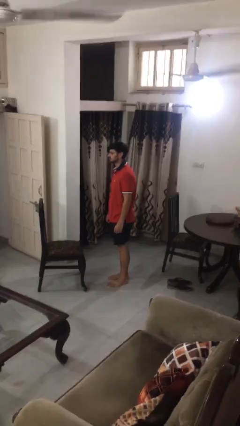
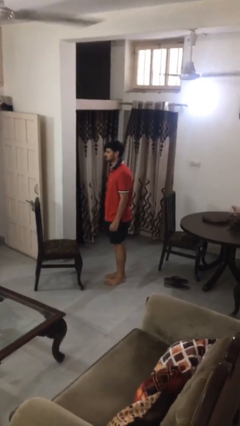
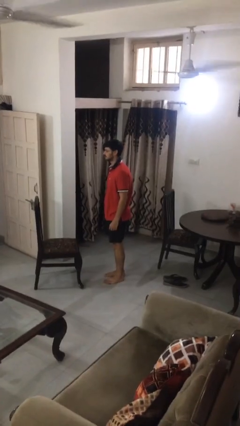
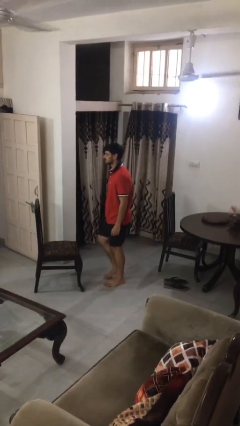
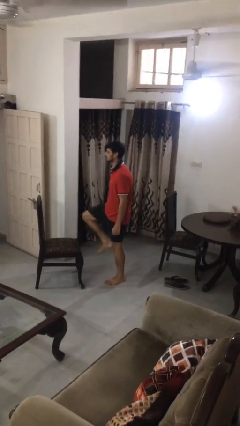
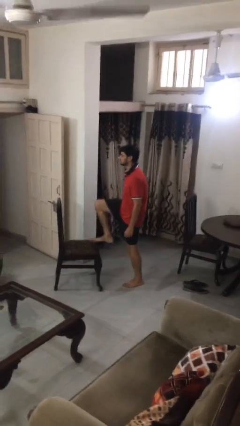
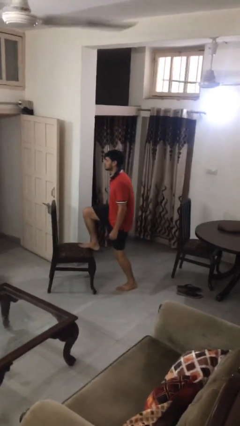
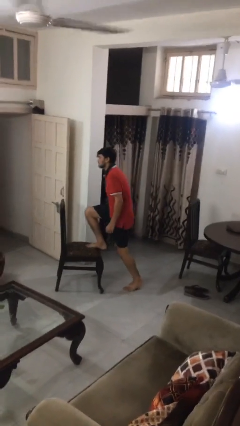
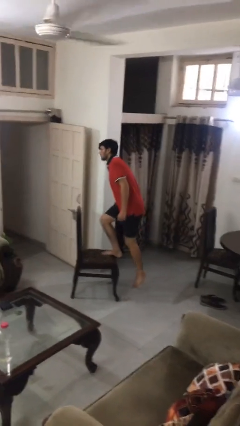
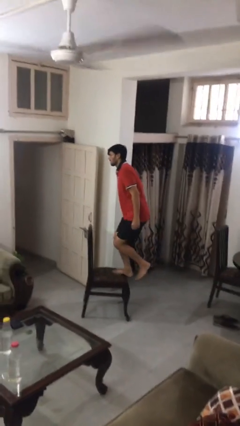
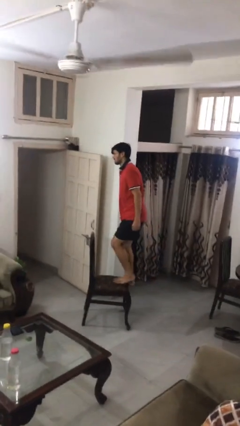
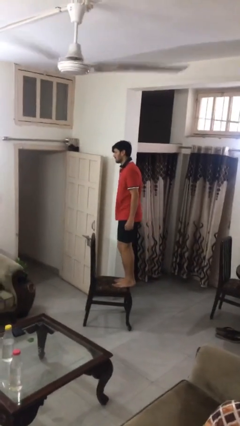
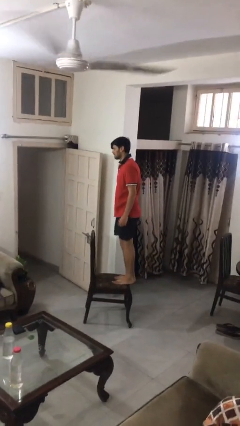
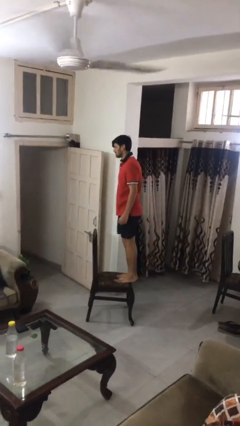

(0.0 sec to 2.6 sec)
person climbs on chair

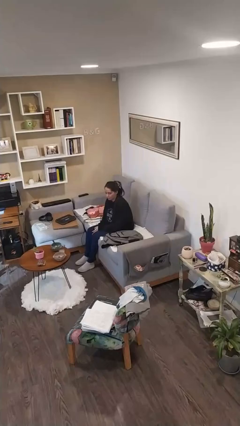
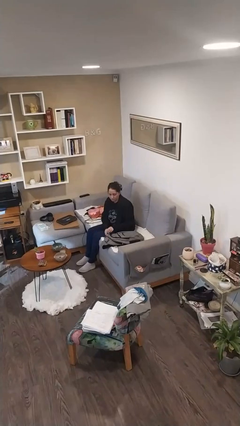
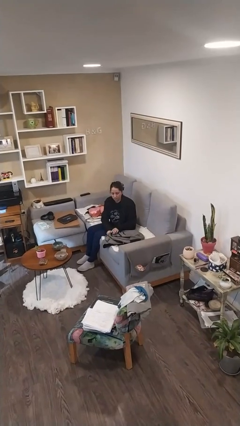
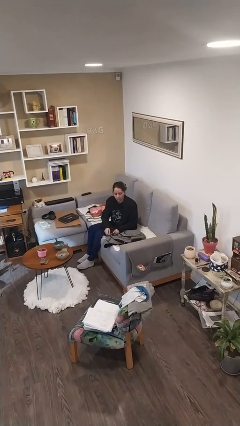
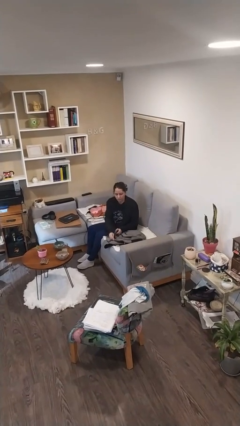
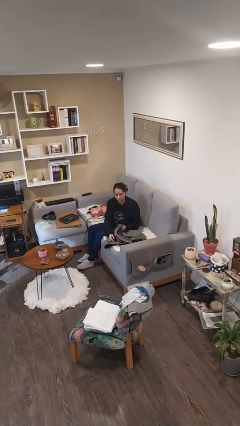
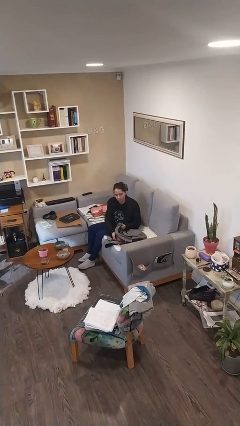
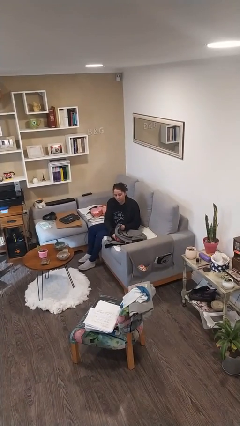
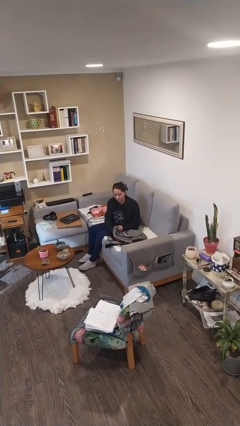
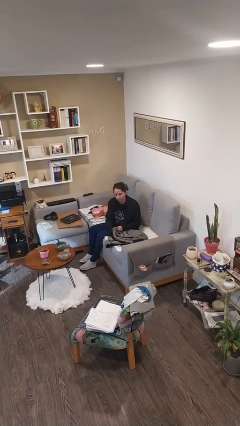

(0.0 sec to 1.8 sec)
person searches in backpack

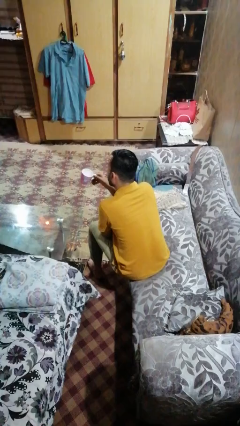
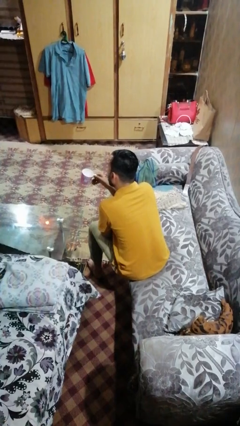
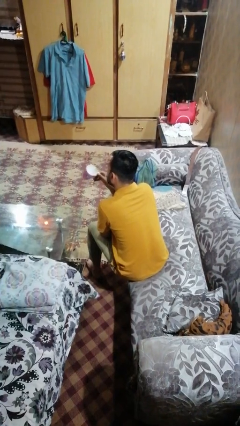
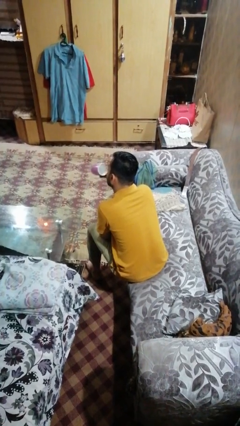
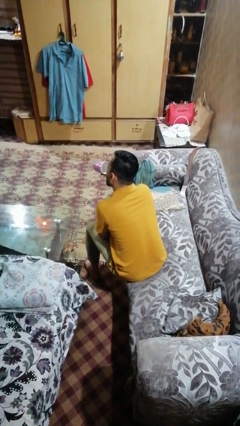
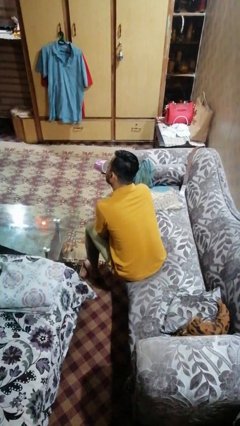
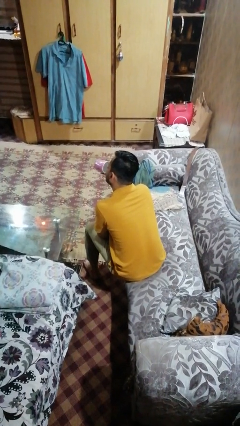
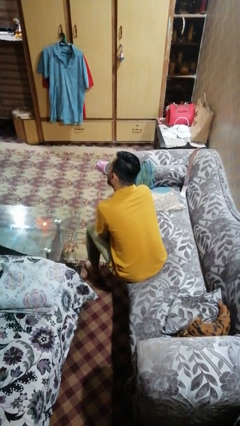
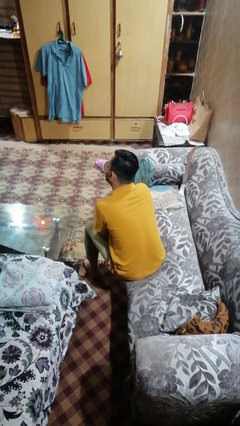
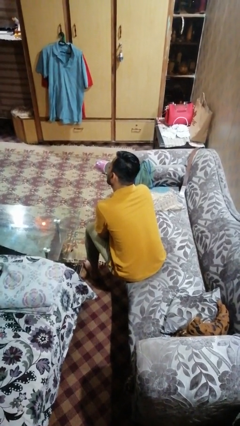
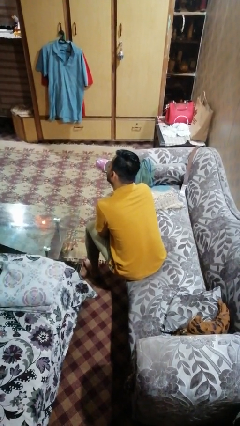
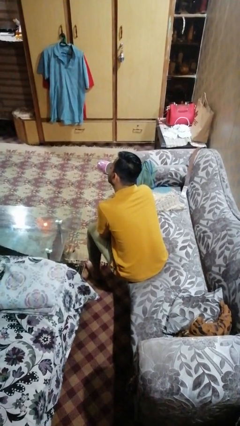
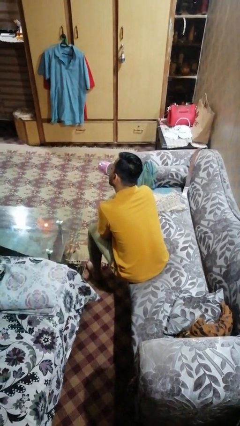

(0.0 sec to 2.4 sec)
person drinks from mug

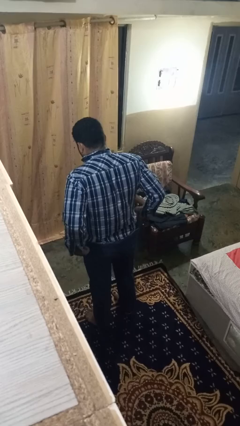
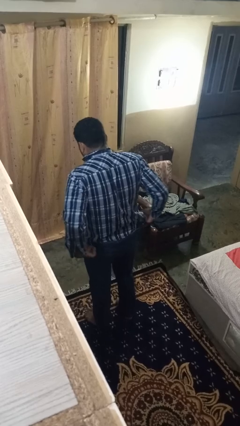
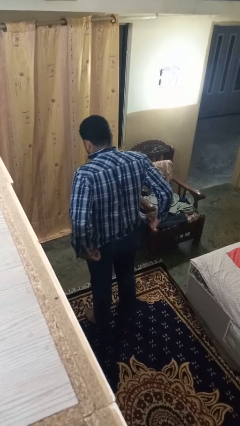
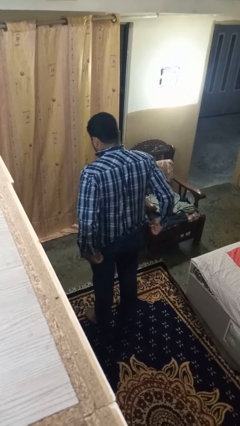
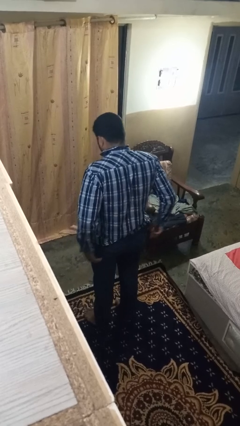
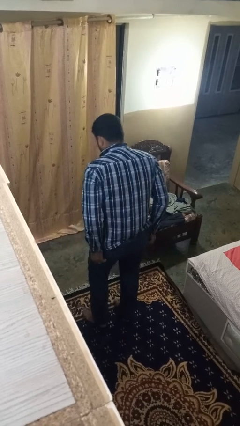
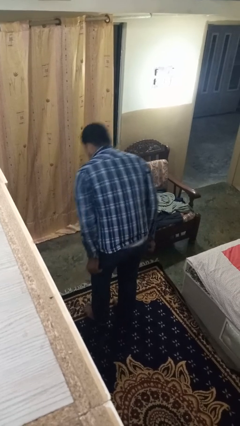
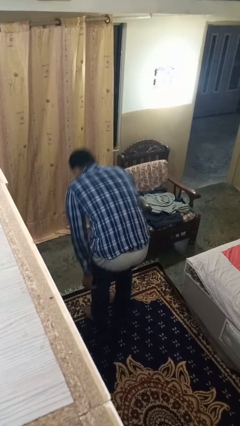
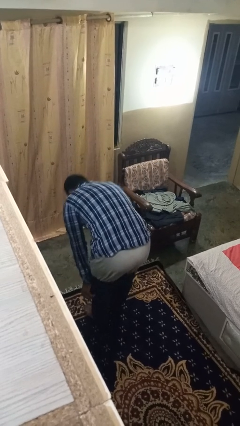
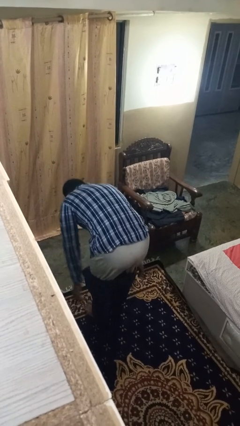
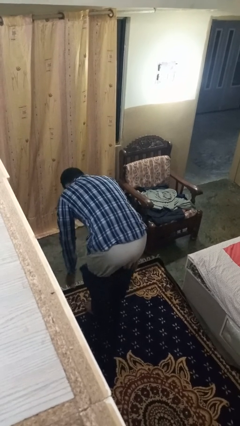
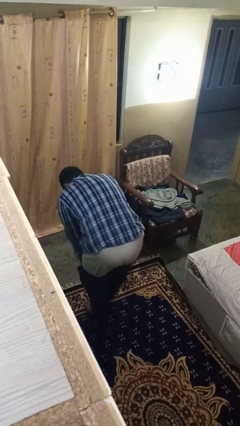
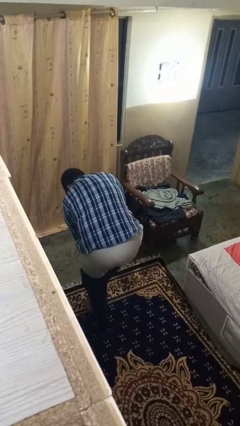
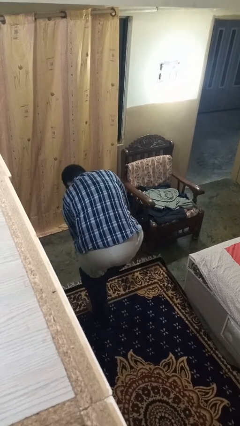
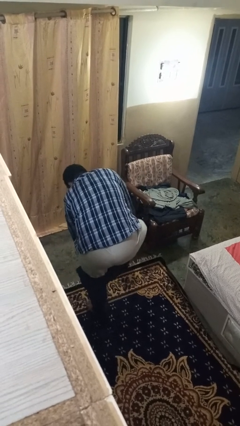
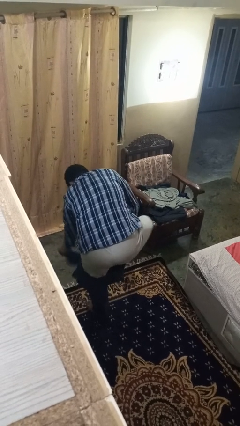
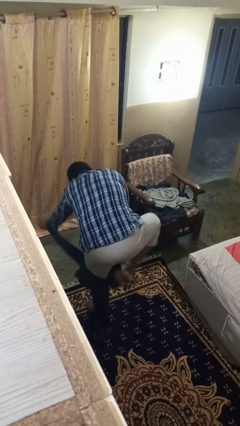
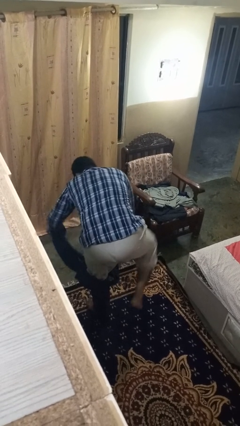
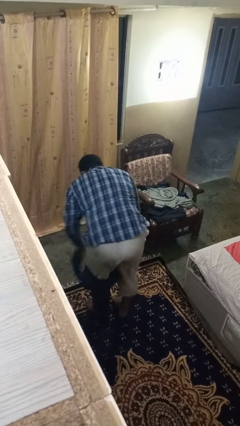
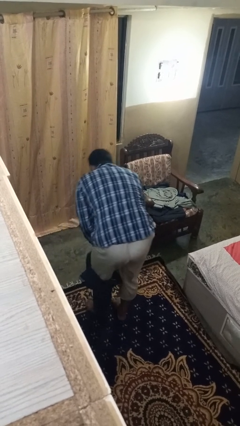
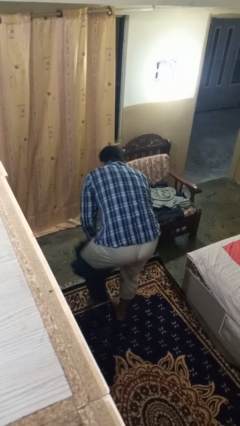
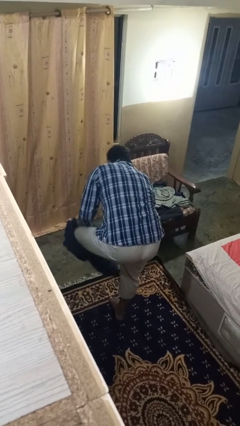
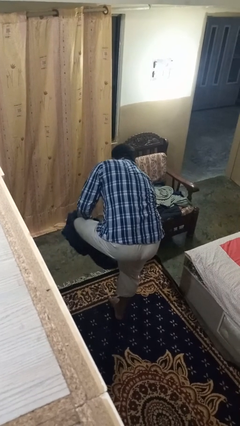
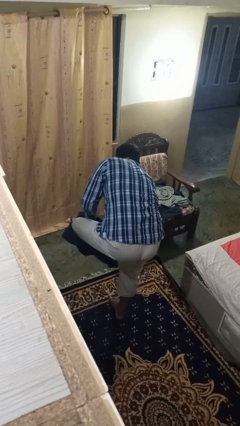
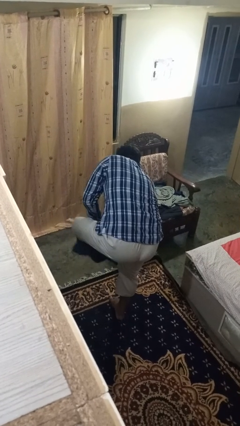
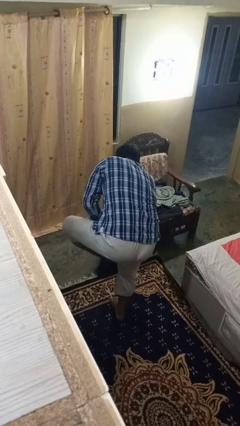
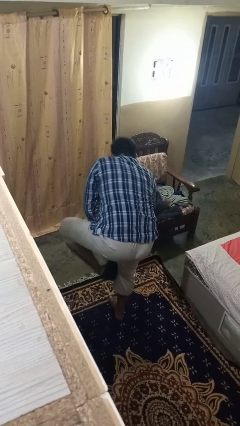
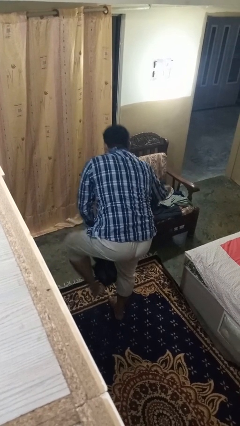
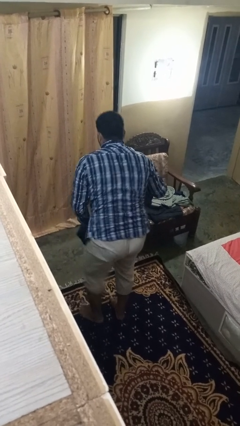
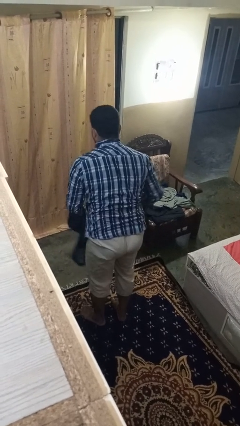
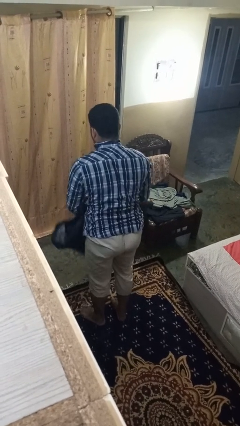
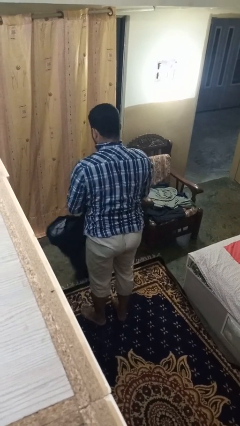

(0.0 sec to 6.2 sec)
person takes off pants

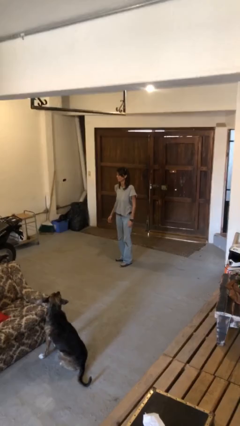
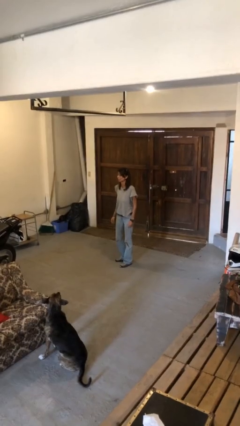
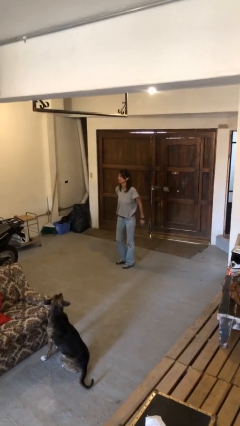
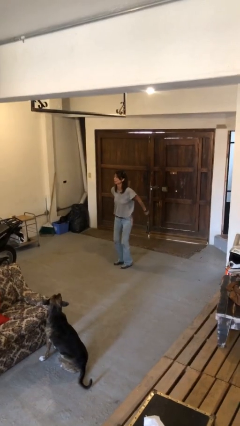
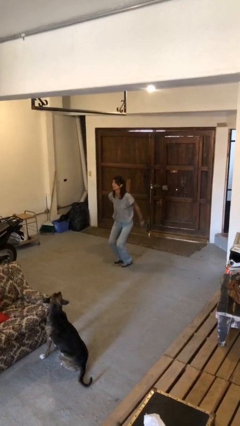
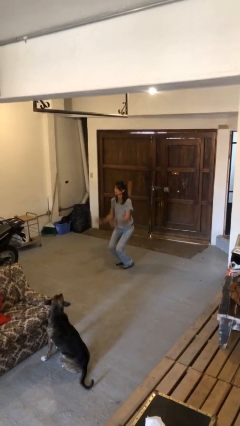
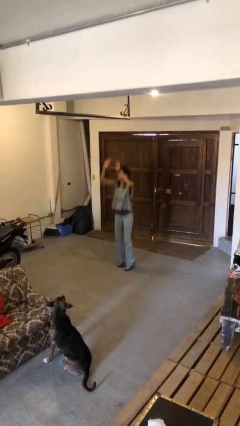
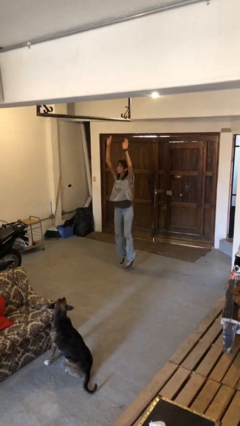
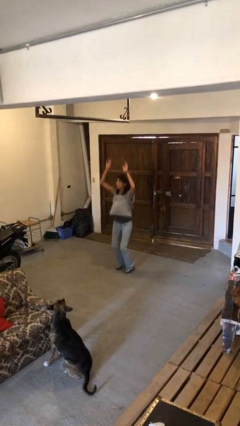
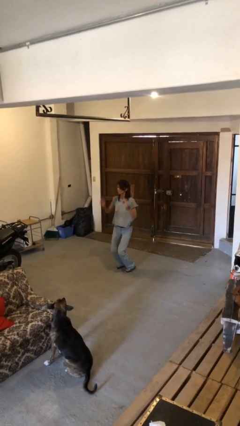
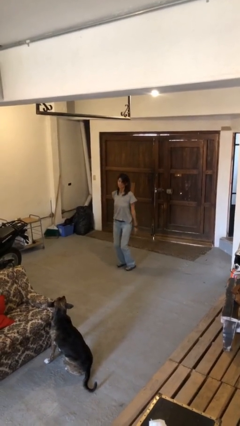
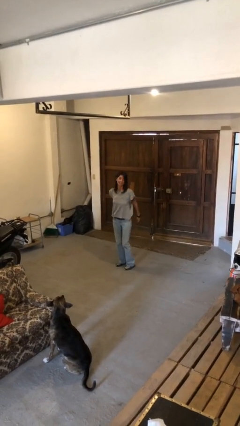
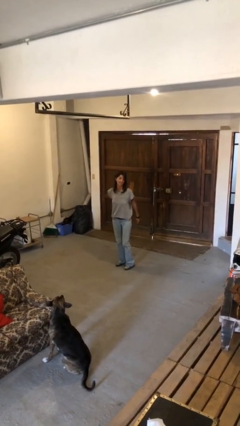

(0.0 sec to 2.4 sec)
person jumps

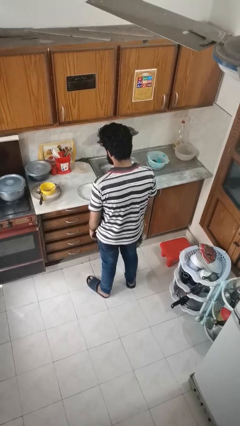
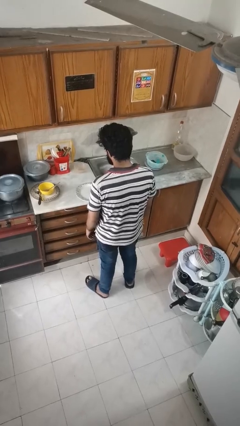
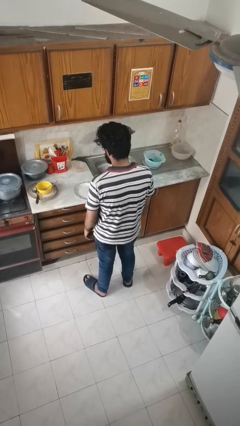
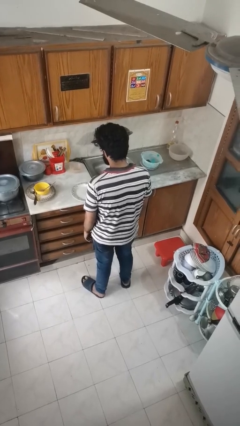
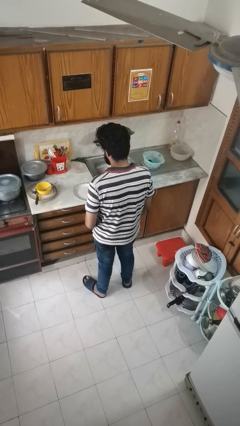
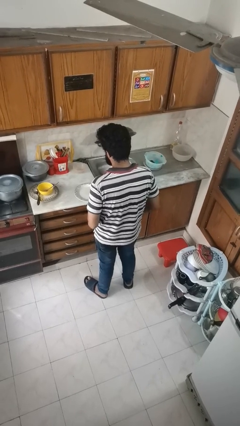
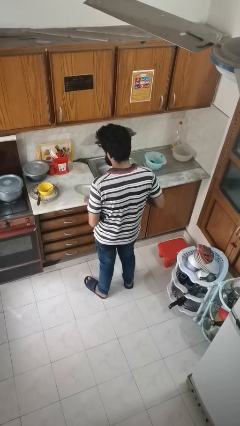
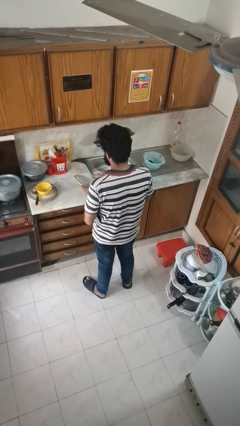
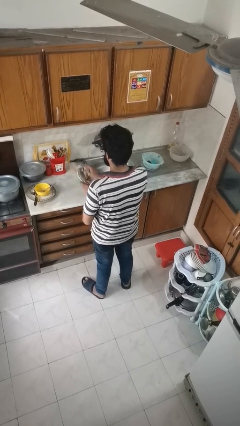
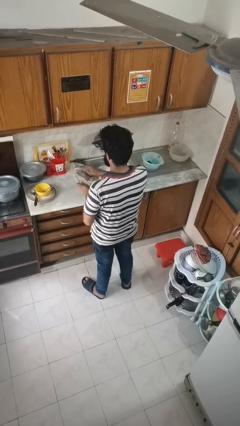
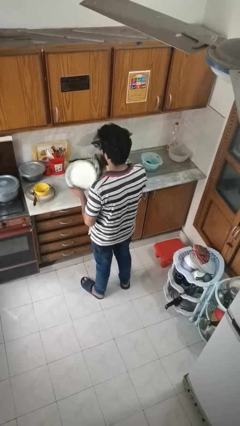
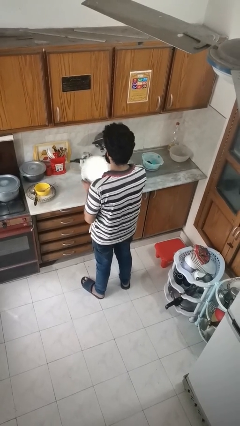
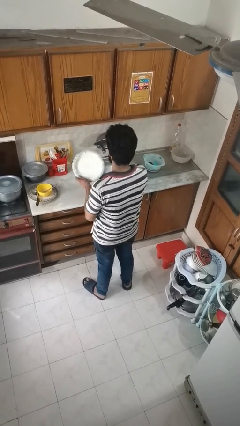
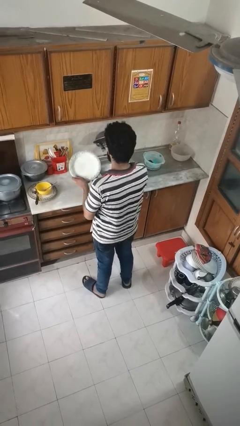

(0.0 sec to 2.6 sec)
person dries dish
